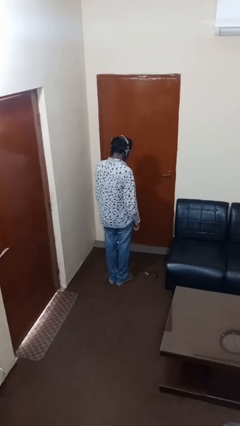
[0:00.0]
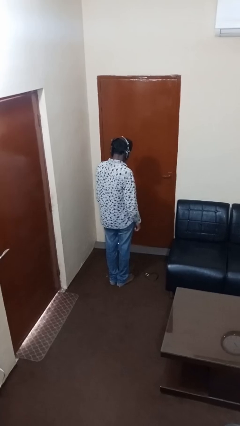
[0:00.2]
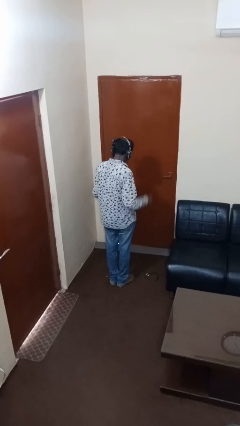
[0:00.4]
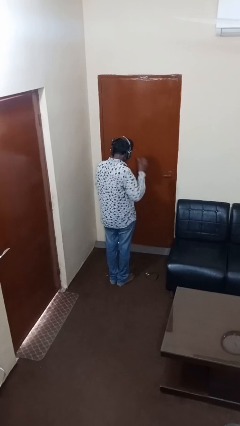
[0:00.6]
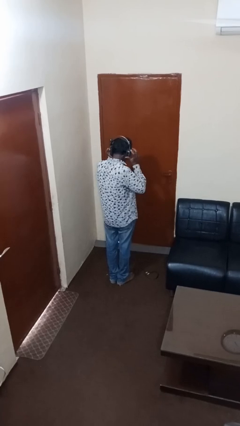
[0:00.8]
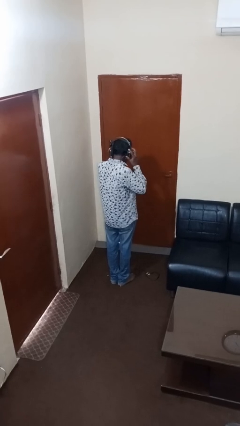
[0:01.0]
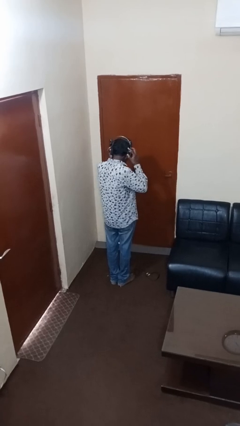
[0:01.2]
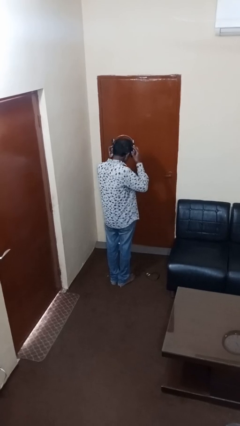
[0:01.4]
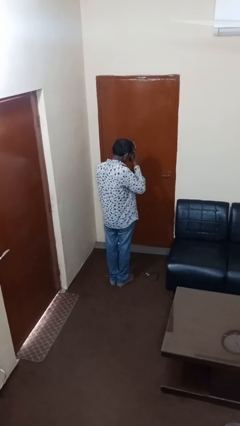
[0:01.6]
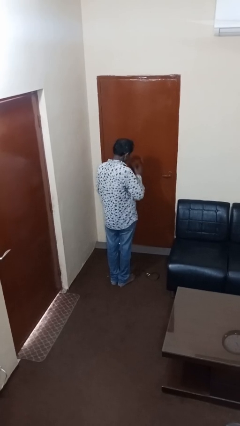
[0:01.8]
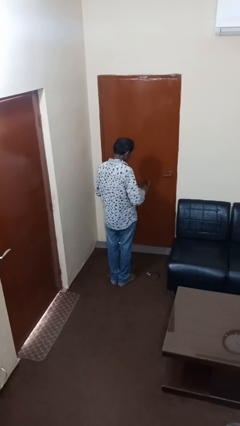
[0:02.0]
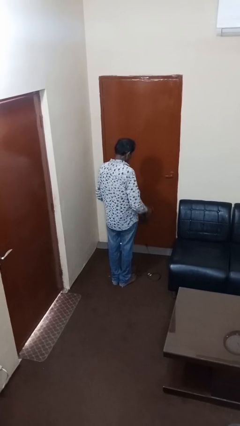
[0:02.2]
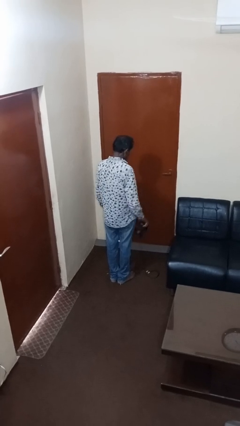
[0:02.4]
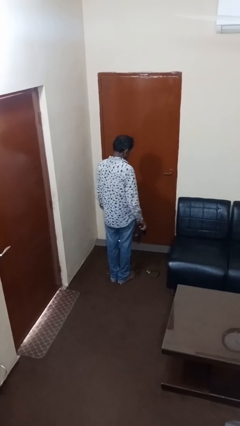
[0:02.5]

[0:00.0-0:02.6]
person takes off headphones

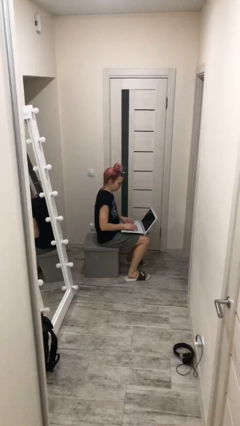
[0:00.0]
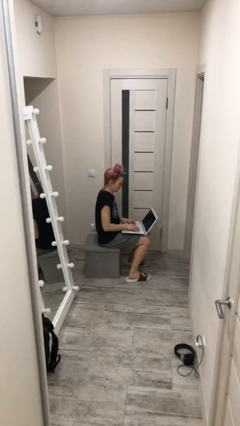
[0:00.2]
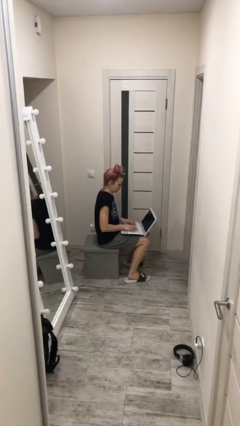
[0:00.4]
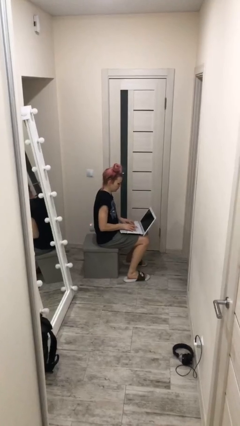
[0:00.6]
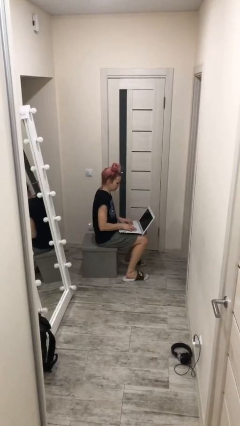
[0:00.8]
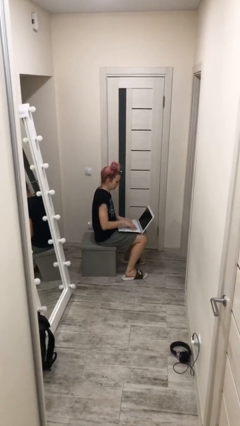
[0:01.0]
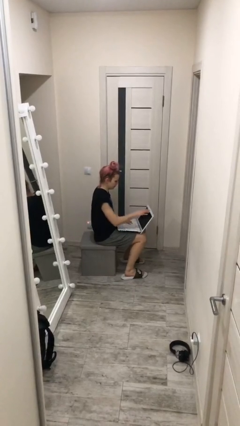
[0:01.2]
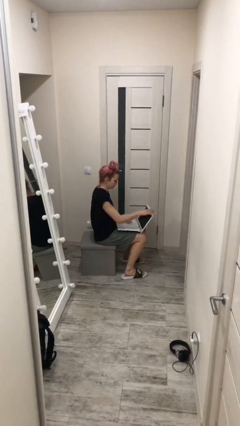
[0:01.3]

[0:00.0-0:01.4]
person interacts with laptop

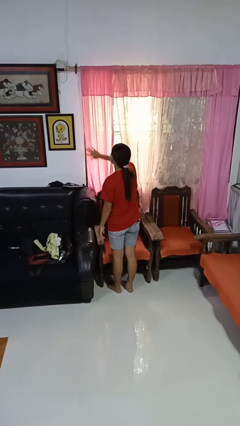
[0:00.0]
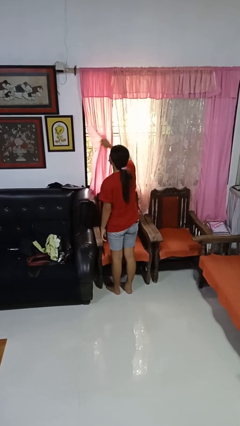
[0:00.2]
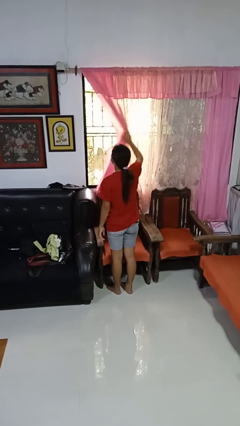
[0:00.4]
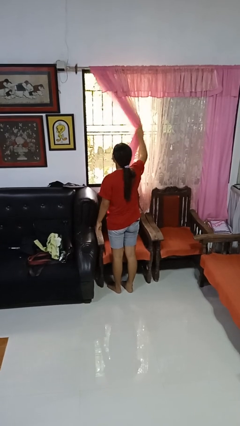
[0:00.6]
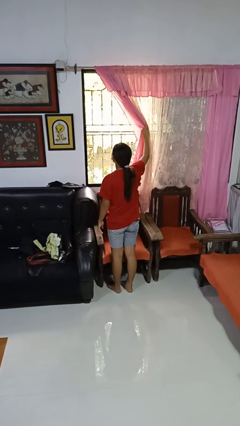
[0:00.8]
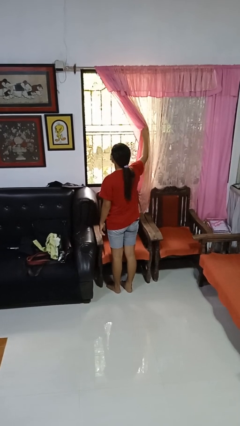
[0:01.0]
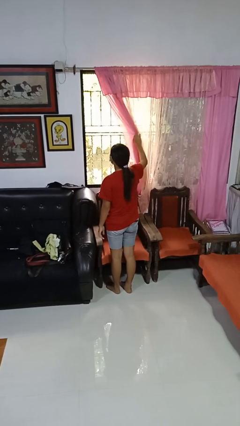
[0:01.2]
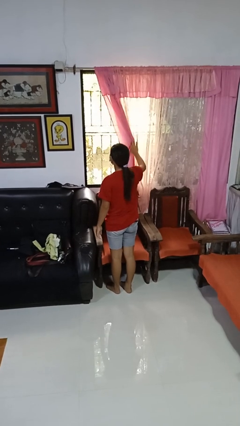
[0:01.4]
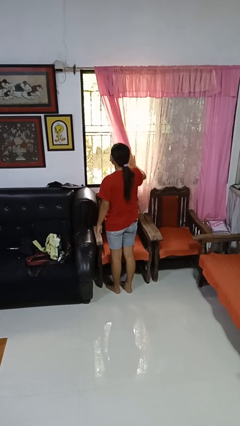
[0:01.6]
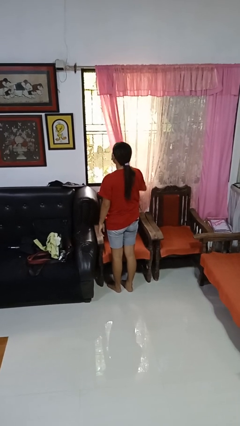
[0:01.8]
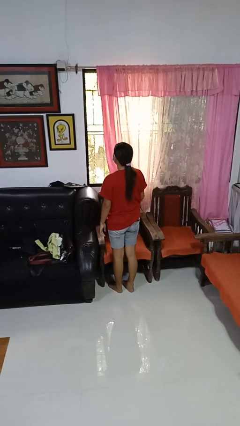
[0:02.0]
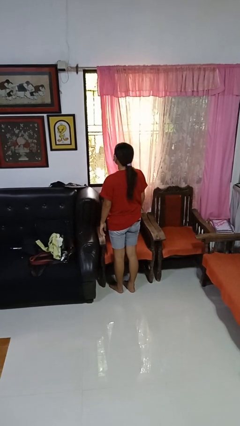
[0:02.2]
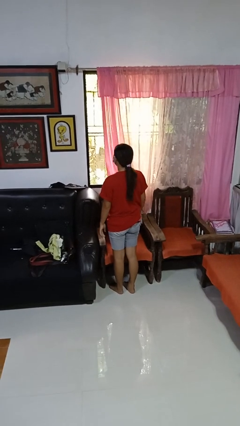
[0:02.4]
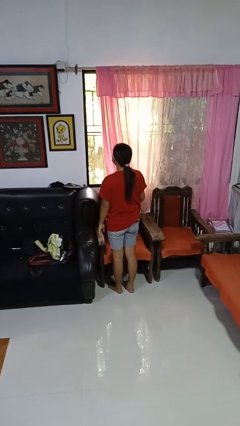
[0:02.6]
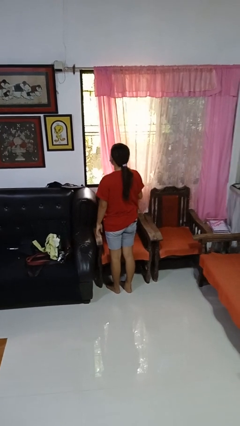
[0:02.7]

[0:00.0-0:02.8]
person opens curtains

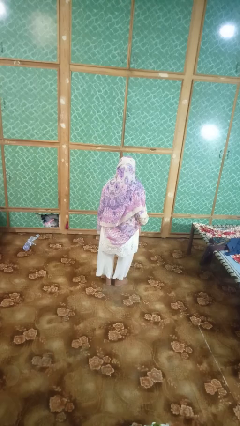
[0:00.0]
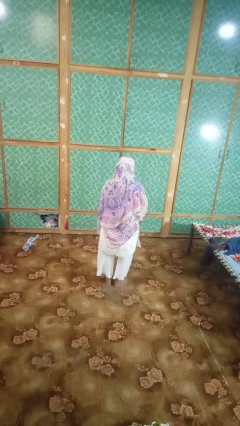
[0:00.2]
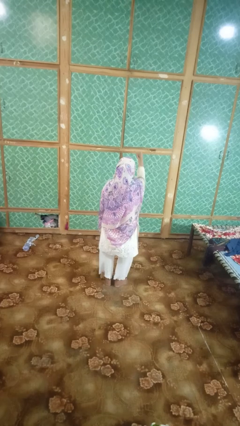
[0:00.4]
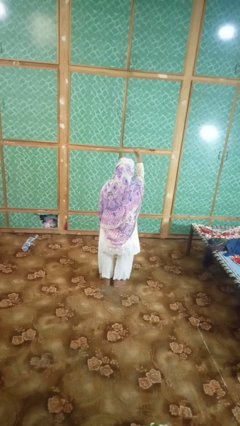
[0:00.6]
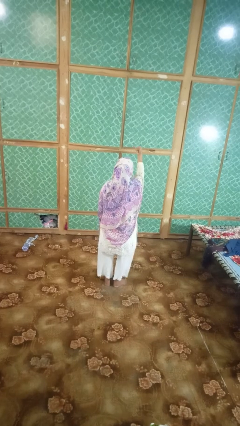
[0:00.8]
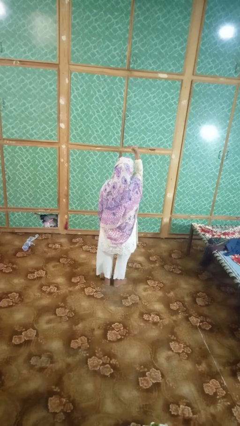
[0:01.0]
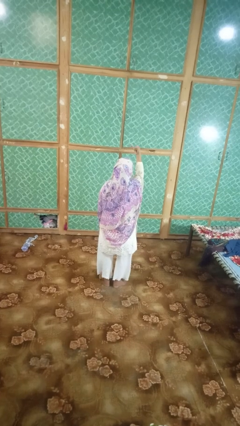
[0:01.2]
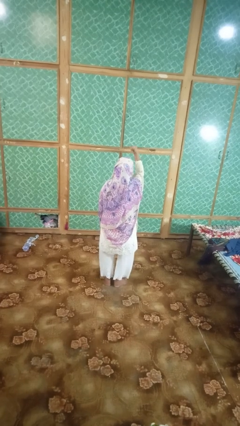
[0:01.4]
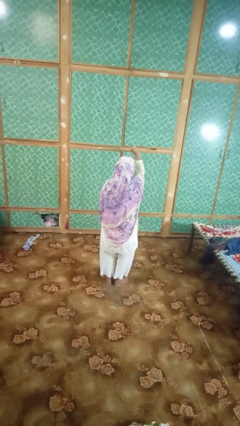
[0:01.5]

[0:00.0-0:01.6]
person gestures hang loose

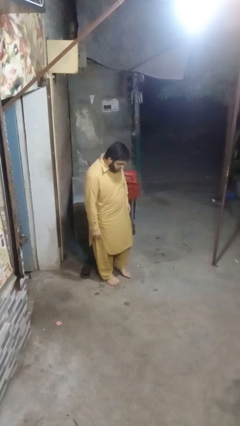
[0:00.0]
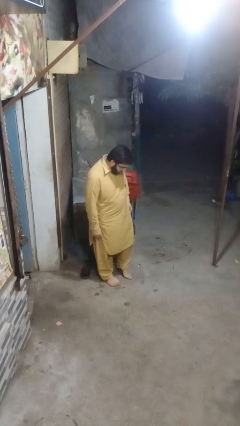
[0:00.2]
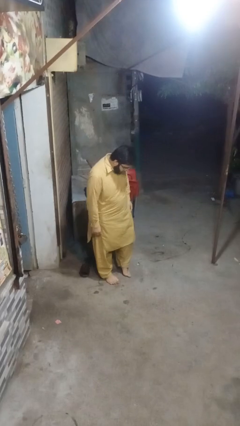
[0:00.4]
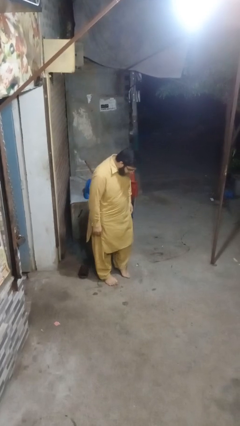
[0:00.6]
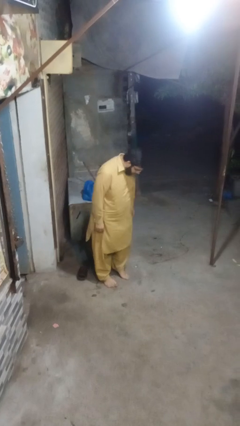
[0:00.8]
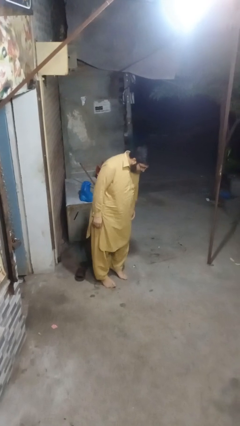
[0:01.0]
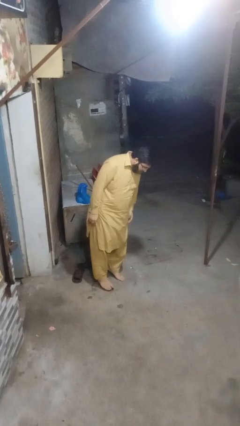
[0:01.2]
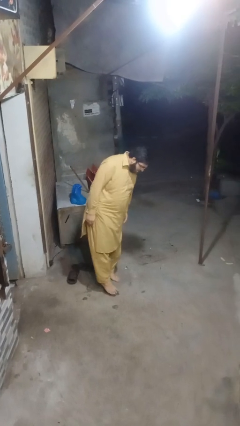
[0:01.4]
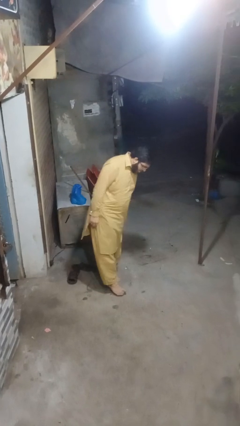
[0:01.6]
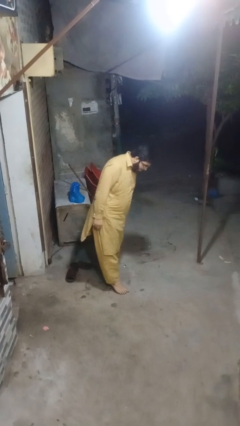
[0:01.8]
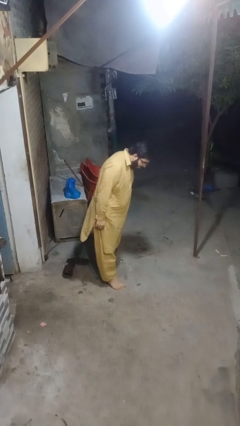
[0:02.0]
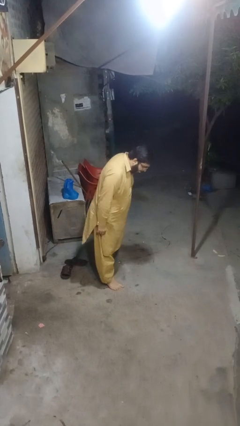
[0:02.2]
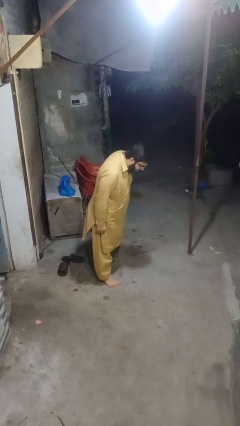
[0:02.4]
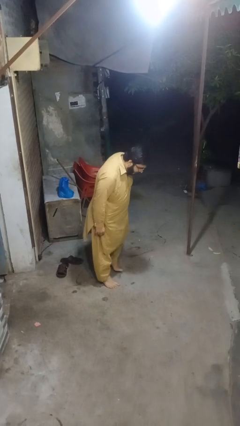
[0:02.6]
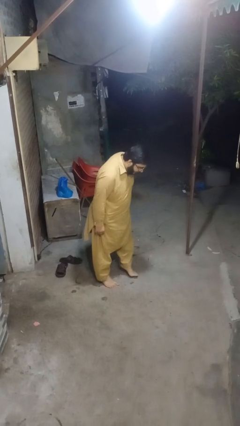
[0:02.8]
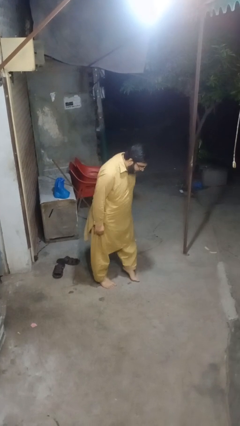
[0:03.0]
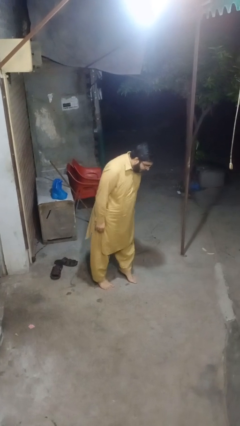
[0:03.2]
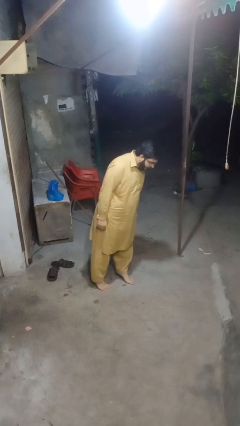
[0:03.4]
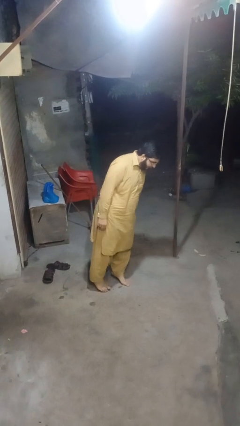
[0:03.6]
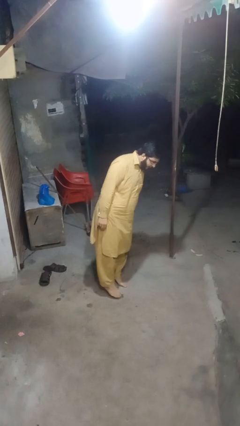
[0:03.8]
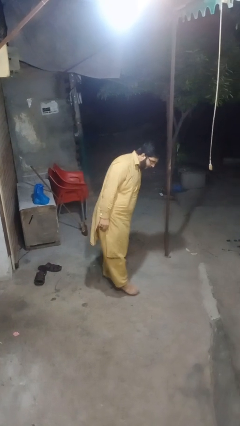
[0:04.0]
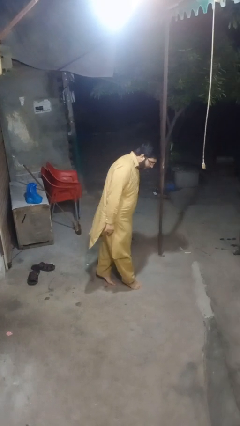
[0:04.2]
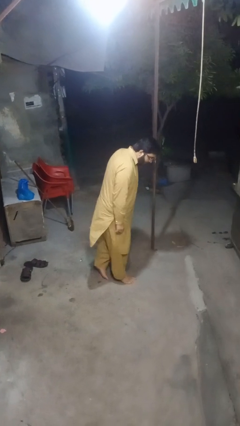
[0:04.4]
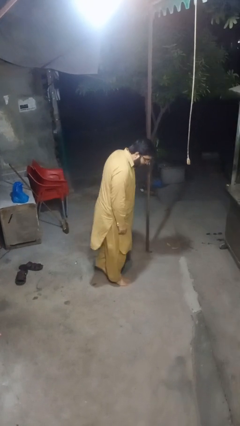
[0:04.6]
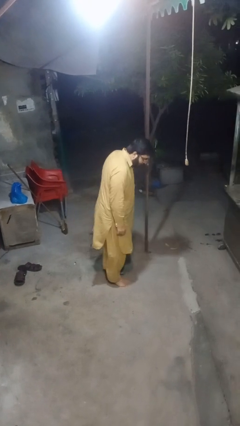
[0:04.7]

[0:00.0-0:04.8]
person walks tiptoe

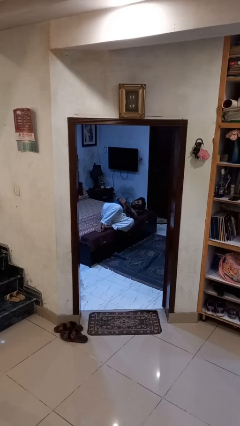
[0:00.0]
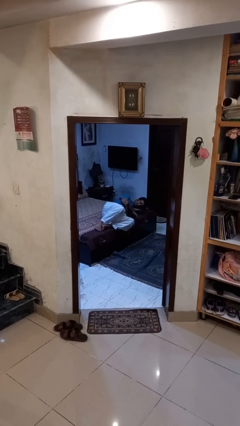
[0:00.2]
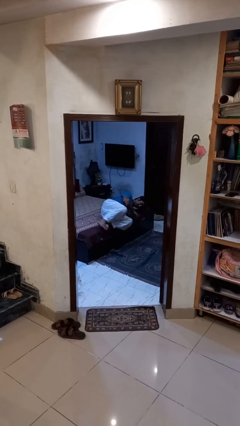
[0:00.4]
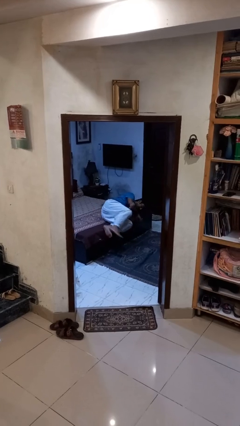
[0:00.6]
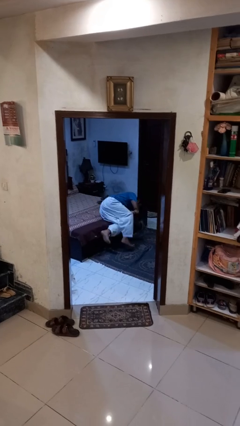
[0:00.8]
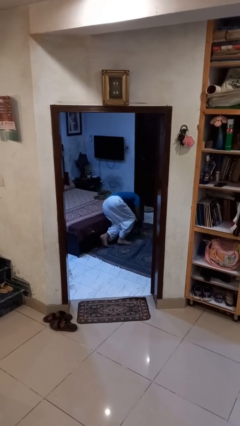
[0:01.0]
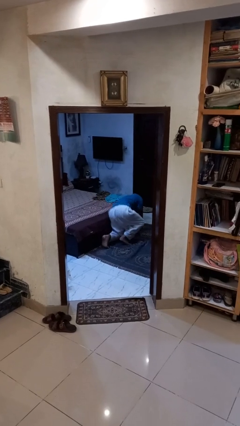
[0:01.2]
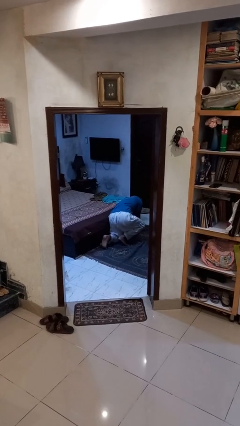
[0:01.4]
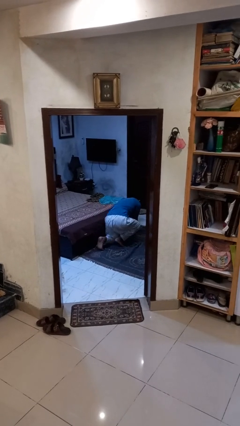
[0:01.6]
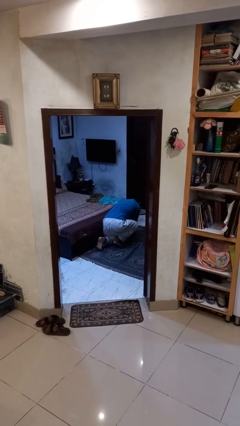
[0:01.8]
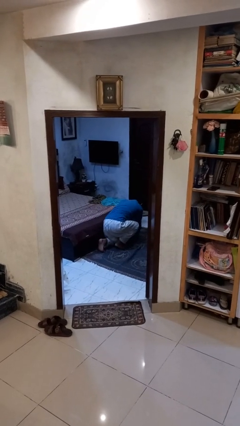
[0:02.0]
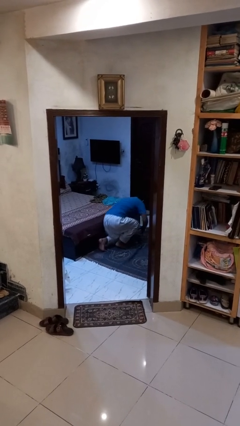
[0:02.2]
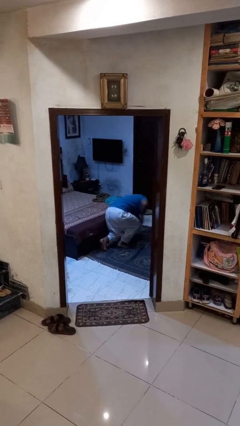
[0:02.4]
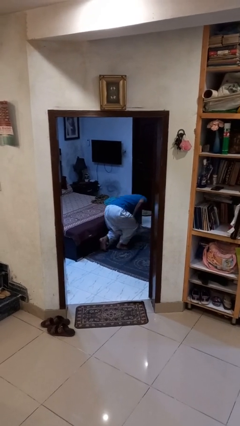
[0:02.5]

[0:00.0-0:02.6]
person falls from bed

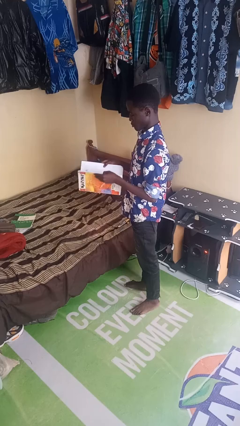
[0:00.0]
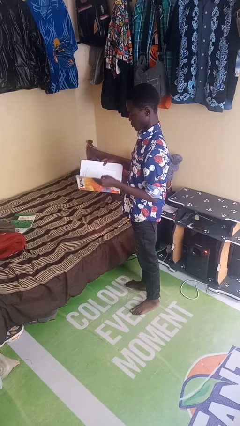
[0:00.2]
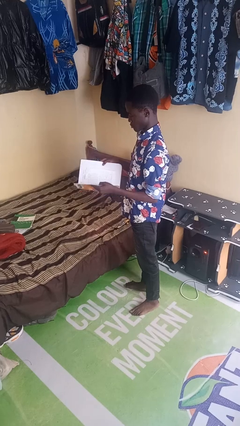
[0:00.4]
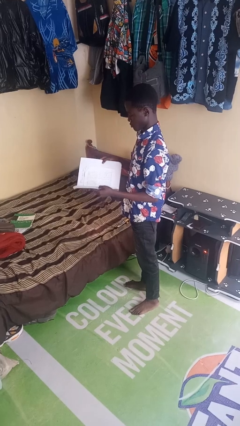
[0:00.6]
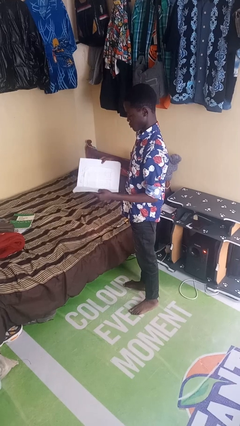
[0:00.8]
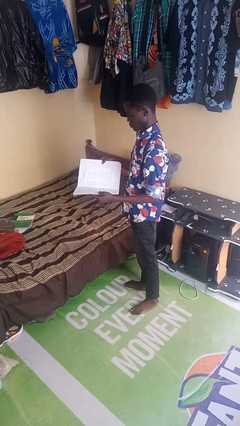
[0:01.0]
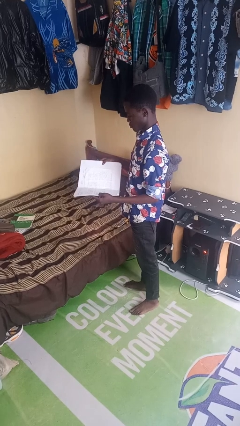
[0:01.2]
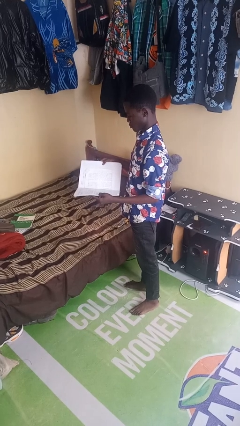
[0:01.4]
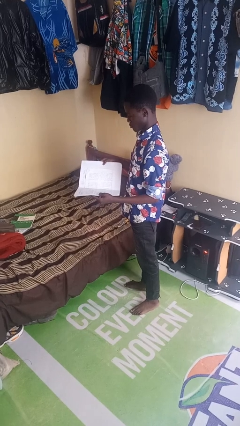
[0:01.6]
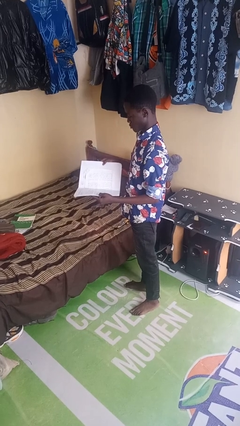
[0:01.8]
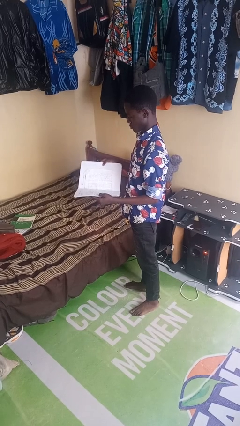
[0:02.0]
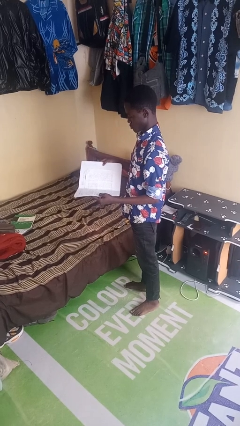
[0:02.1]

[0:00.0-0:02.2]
person reads book
